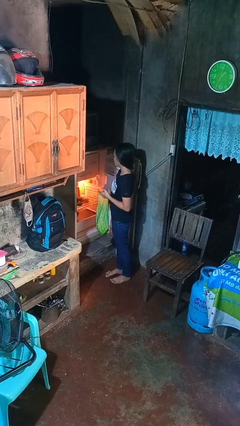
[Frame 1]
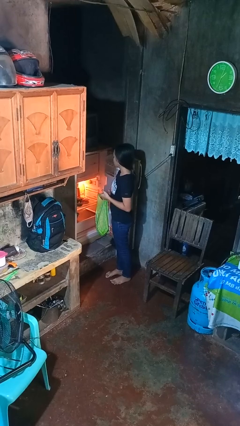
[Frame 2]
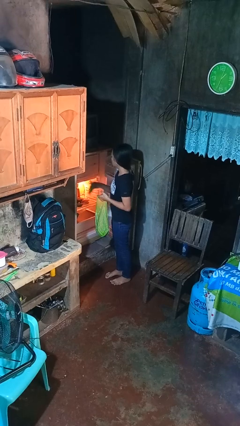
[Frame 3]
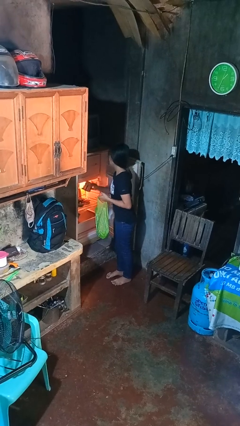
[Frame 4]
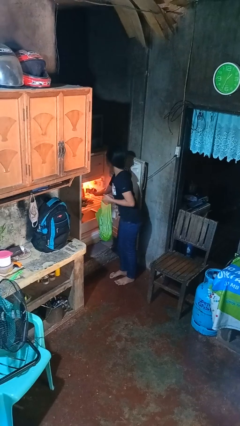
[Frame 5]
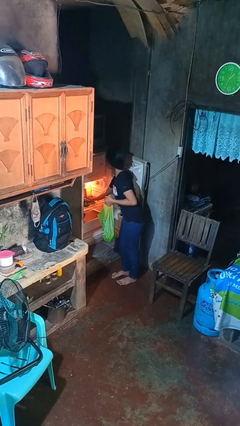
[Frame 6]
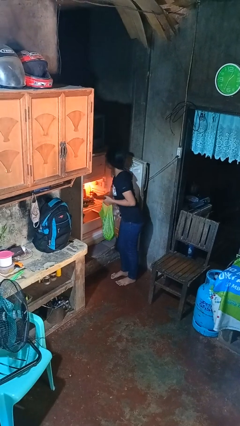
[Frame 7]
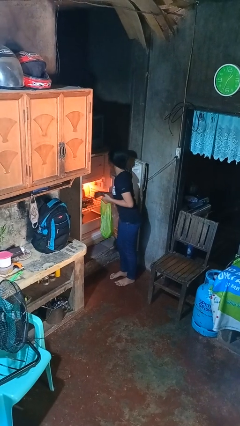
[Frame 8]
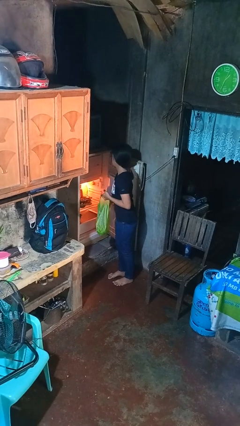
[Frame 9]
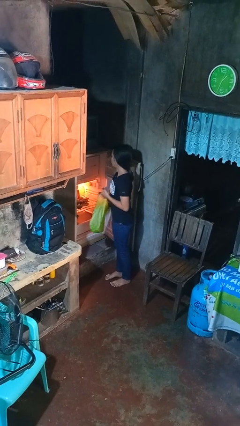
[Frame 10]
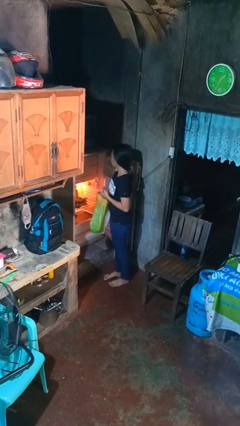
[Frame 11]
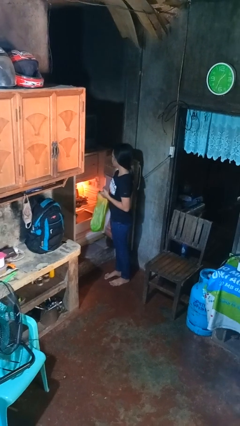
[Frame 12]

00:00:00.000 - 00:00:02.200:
person loads groceries into refrigerator

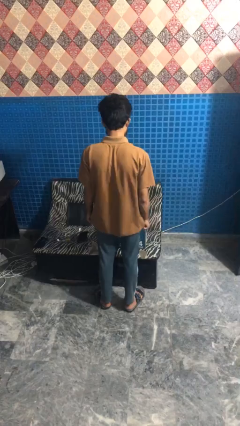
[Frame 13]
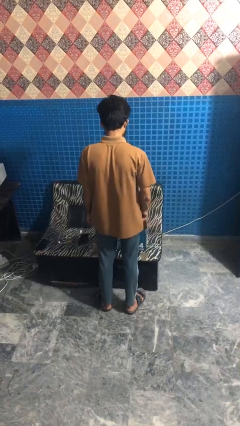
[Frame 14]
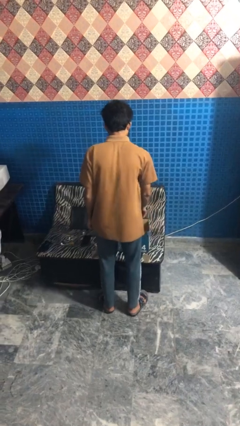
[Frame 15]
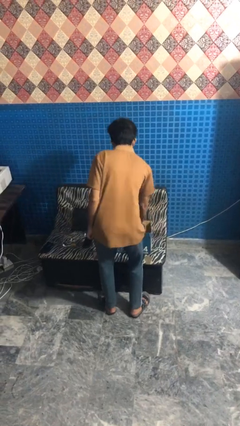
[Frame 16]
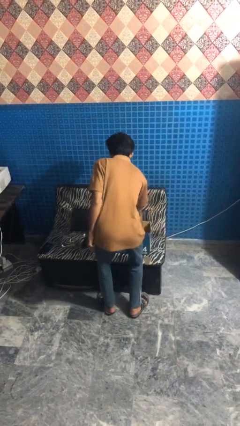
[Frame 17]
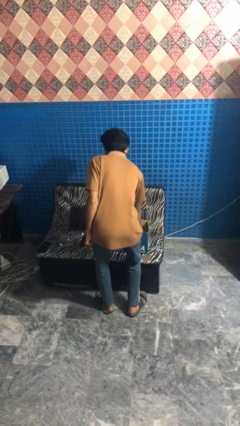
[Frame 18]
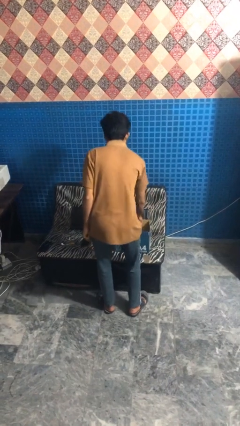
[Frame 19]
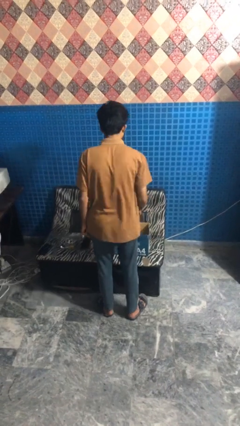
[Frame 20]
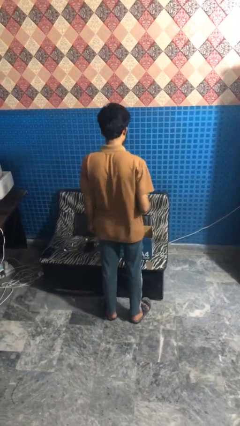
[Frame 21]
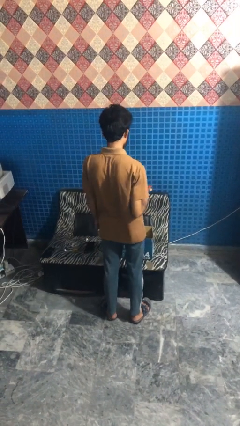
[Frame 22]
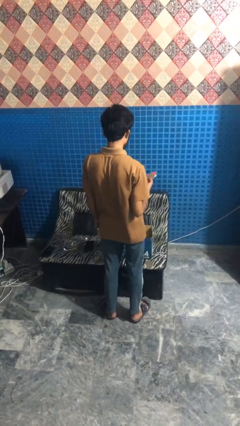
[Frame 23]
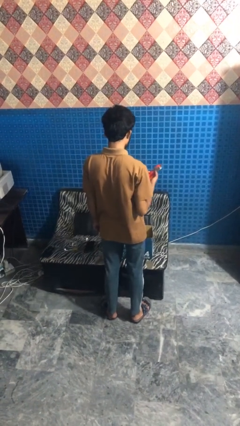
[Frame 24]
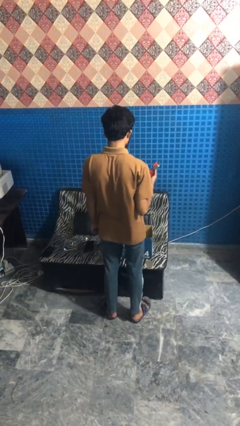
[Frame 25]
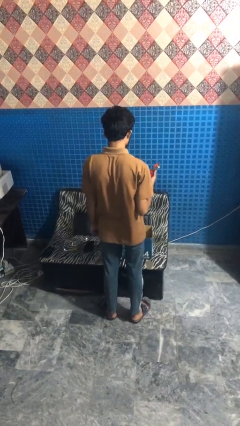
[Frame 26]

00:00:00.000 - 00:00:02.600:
person takes object from box

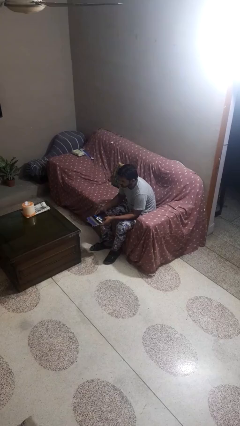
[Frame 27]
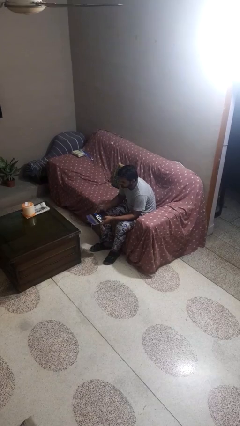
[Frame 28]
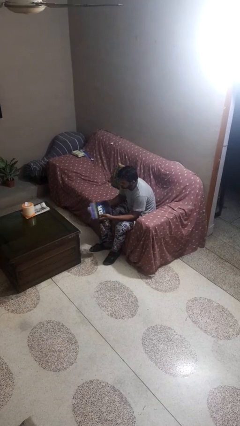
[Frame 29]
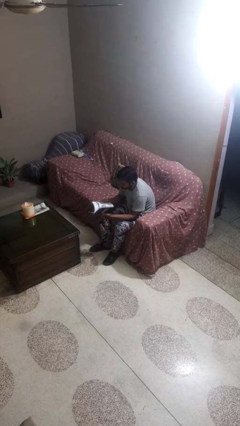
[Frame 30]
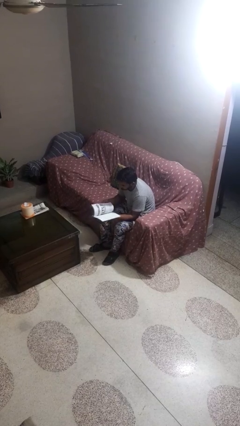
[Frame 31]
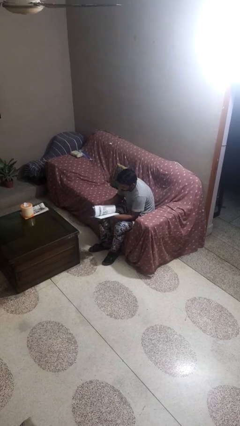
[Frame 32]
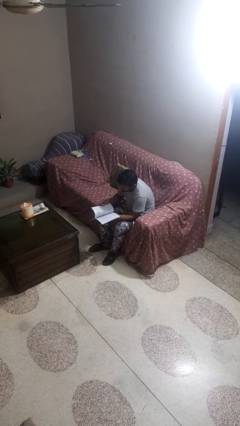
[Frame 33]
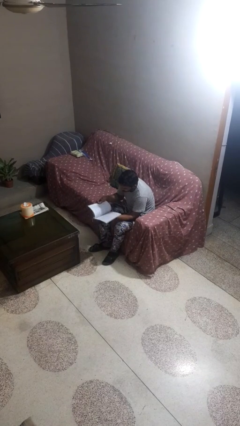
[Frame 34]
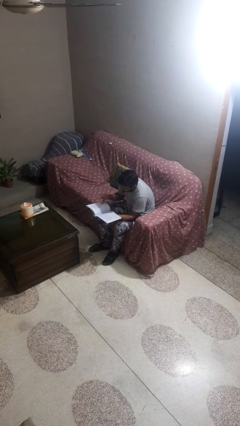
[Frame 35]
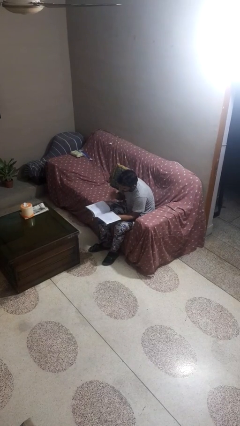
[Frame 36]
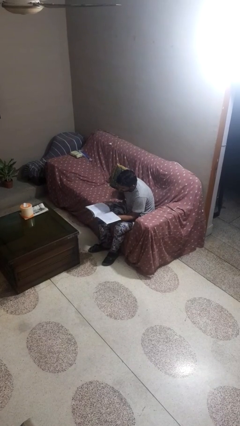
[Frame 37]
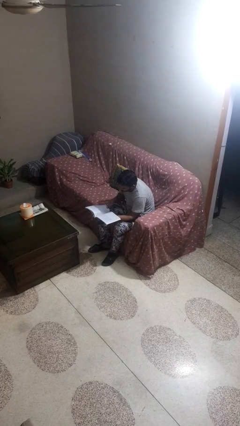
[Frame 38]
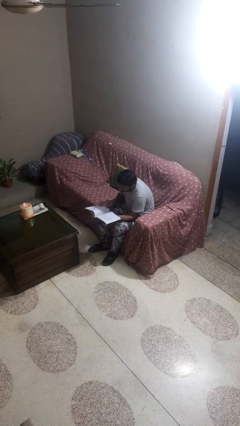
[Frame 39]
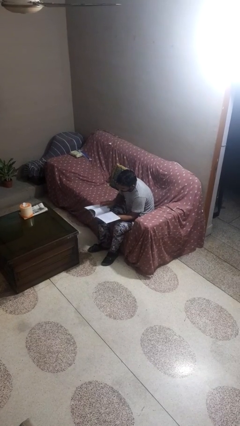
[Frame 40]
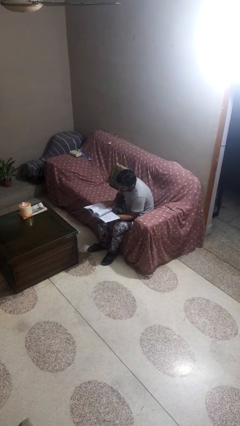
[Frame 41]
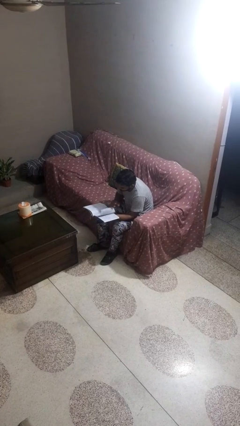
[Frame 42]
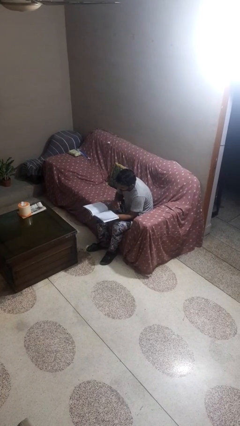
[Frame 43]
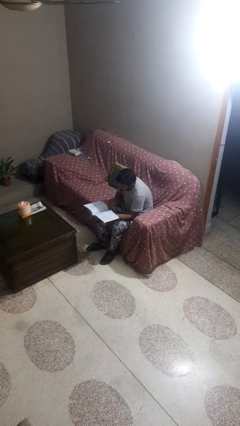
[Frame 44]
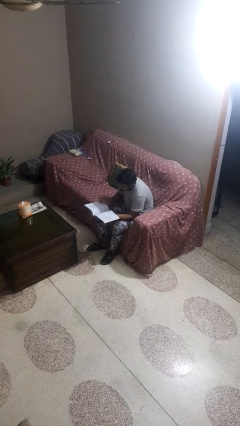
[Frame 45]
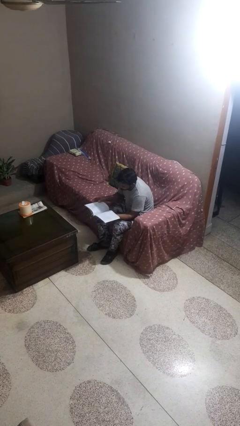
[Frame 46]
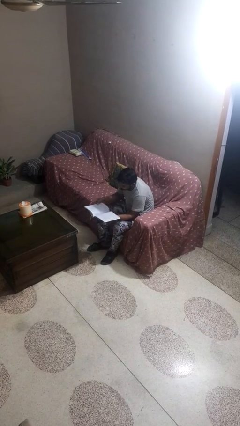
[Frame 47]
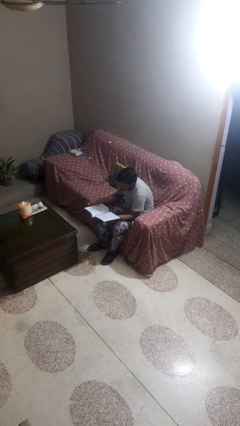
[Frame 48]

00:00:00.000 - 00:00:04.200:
person reads book

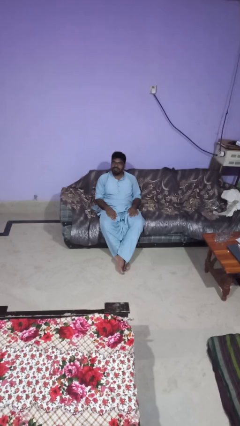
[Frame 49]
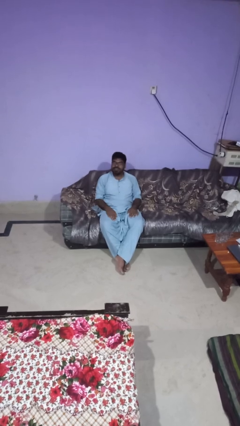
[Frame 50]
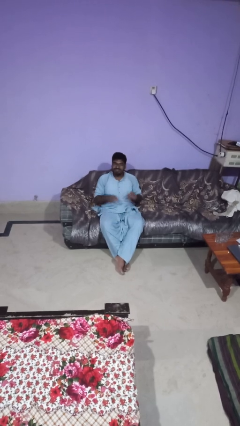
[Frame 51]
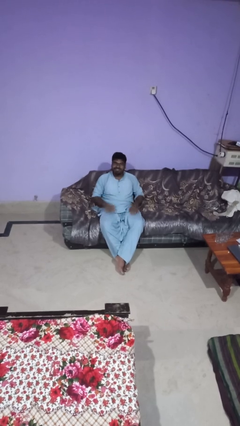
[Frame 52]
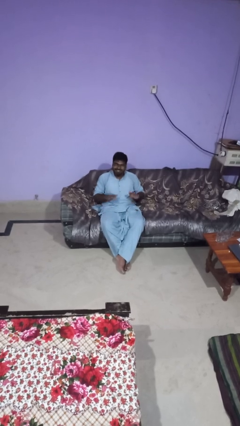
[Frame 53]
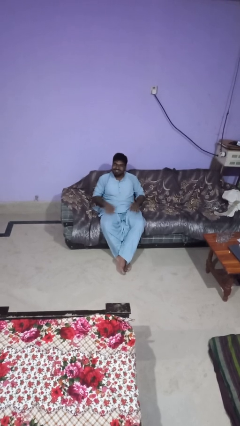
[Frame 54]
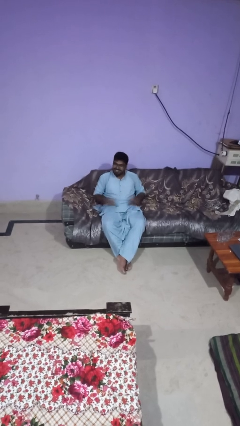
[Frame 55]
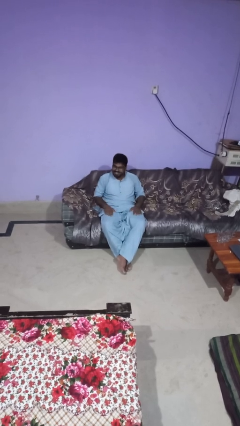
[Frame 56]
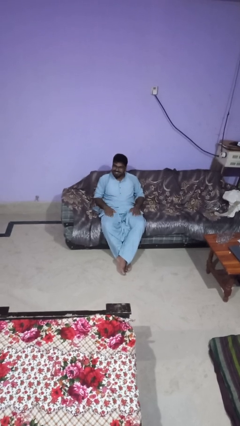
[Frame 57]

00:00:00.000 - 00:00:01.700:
person slaps hands on thighs

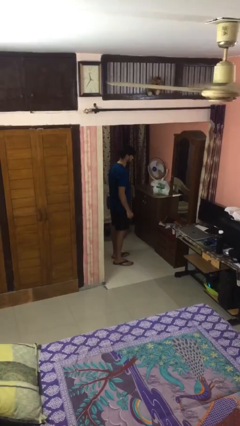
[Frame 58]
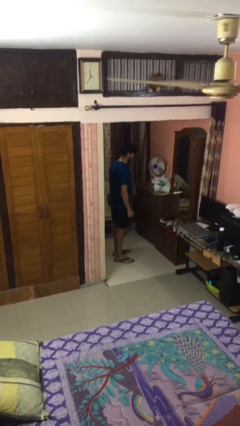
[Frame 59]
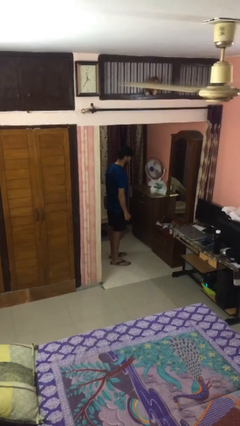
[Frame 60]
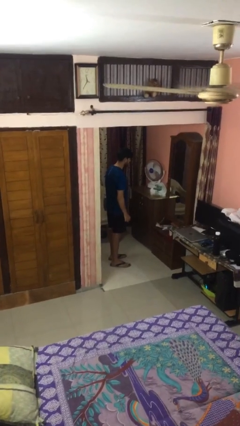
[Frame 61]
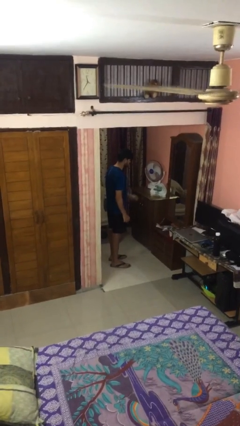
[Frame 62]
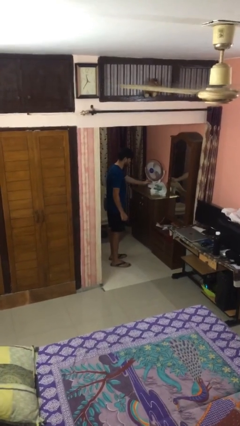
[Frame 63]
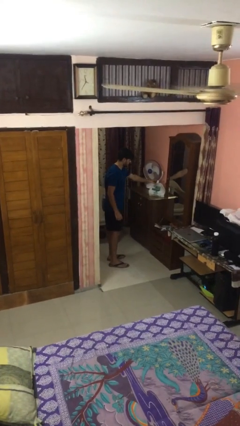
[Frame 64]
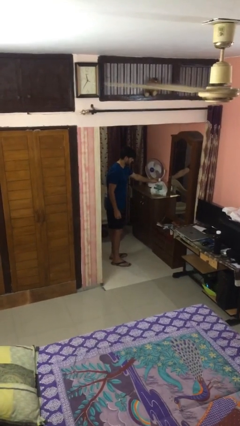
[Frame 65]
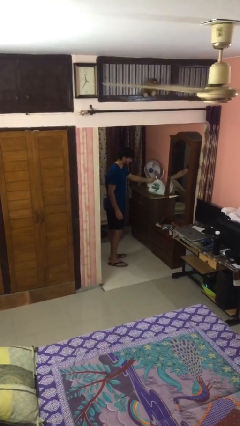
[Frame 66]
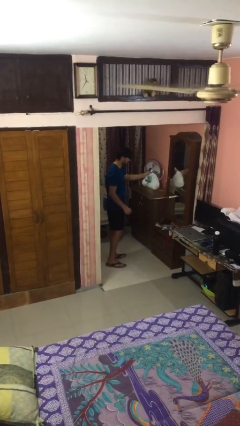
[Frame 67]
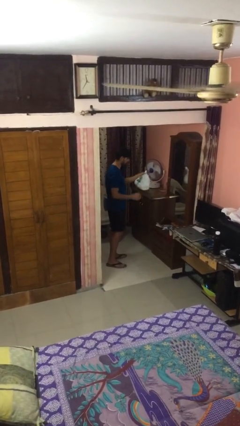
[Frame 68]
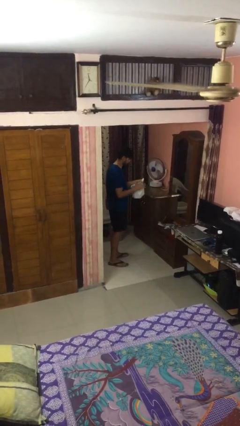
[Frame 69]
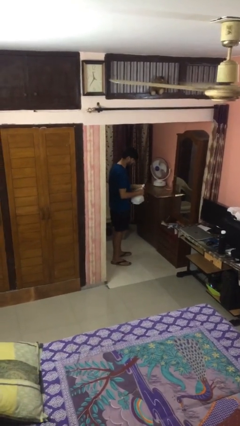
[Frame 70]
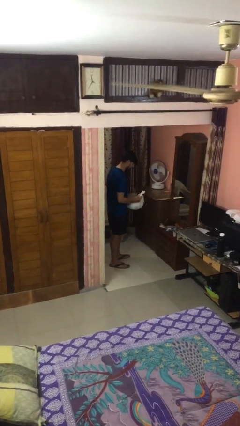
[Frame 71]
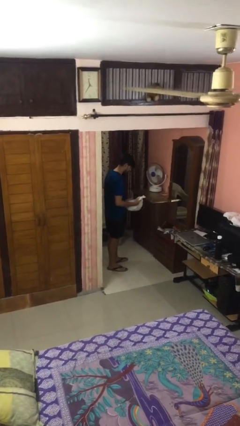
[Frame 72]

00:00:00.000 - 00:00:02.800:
person picks up object from countertop

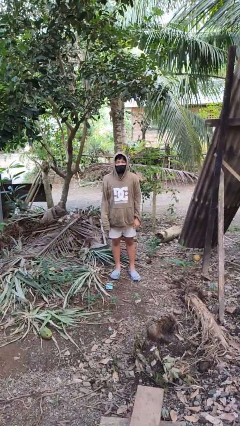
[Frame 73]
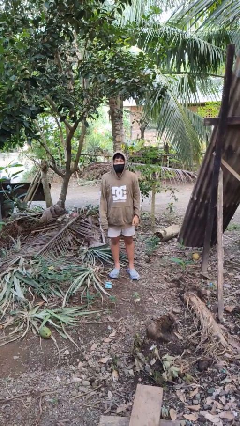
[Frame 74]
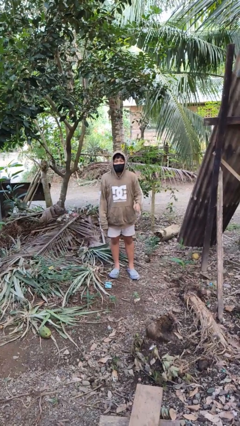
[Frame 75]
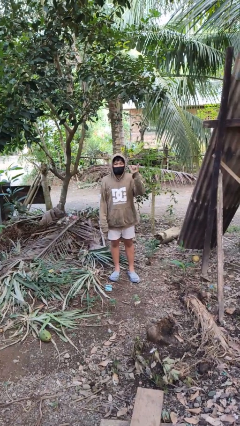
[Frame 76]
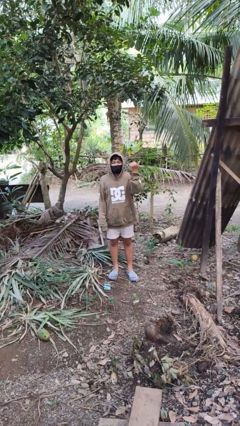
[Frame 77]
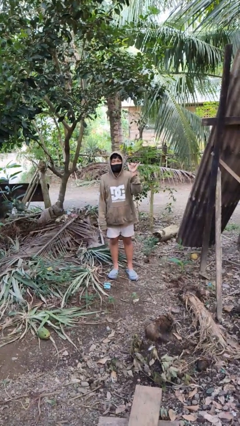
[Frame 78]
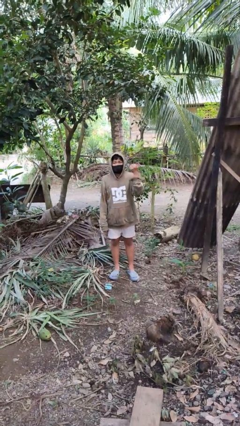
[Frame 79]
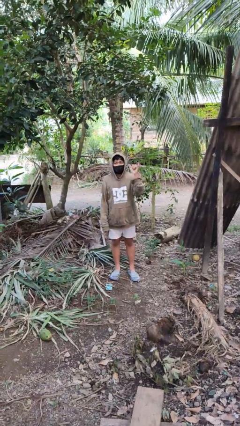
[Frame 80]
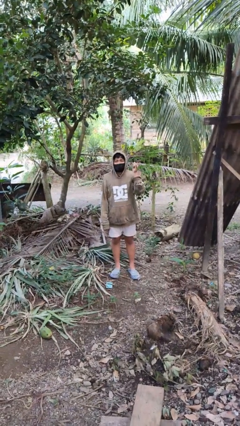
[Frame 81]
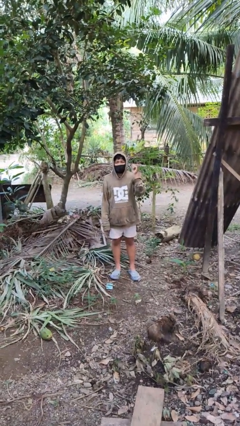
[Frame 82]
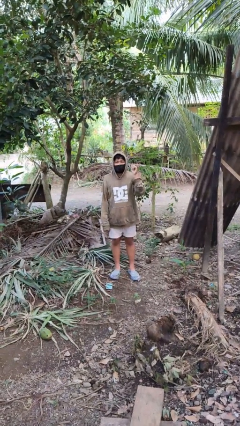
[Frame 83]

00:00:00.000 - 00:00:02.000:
person gestures hang loose

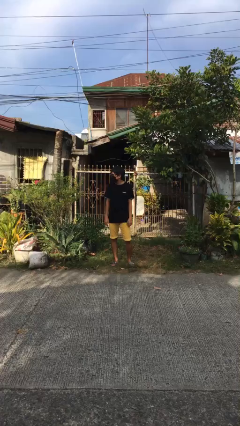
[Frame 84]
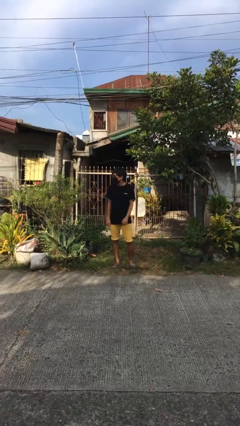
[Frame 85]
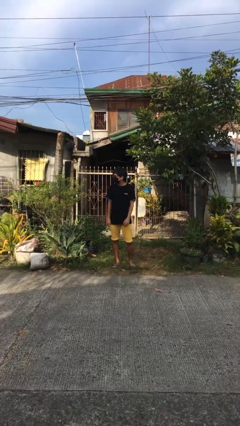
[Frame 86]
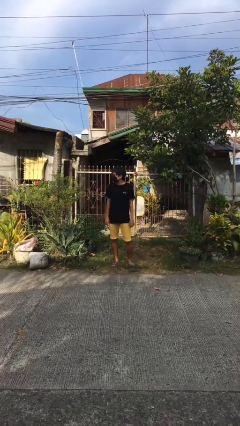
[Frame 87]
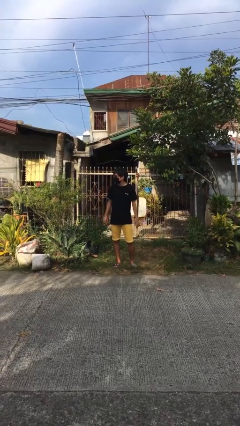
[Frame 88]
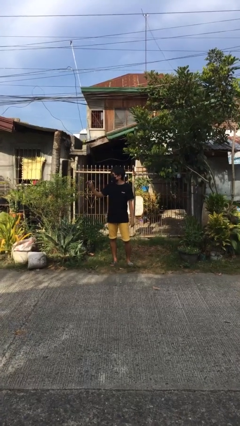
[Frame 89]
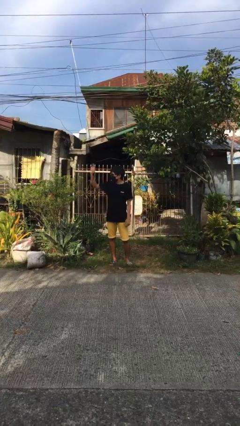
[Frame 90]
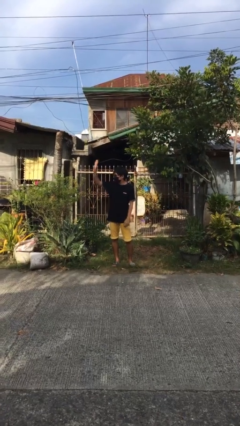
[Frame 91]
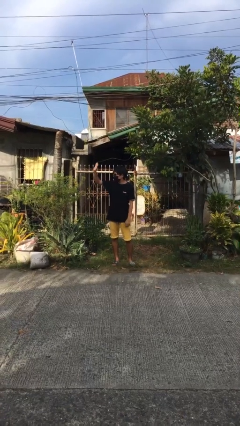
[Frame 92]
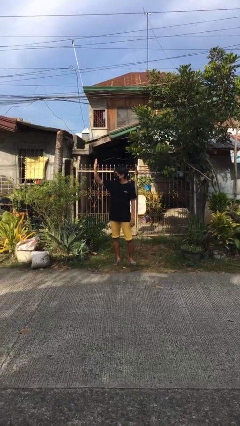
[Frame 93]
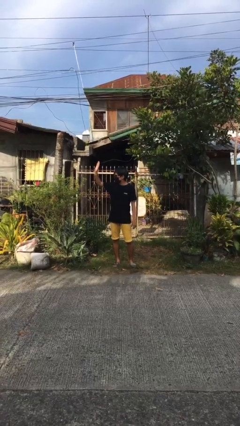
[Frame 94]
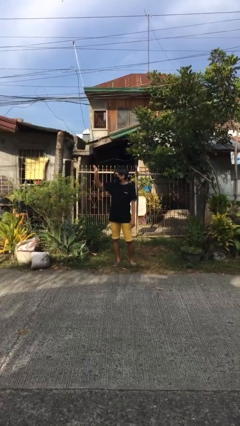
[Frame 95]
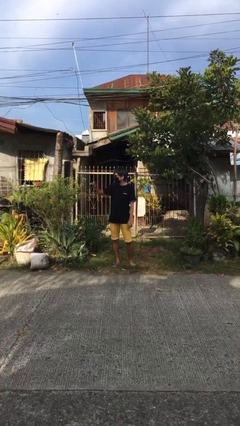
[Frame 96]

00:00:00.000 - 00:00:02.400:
person waves at person
